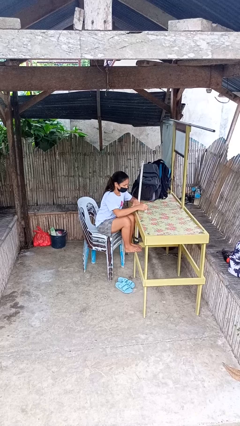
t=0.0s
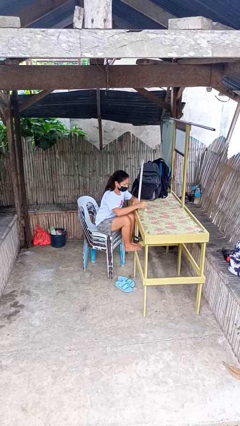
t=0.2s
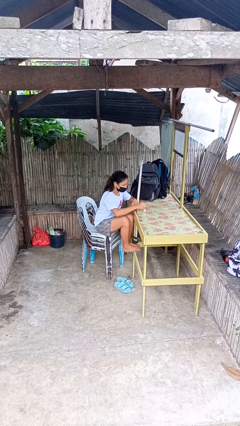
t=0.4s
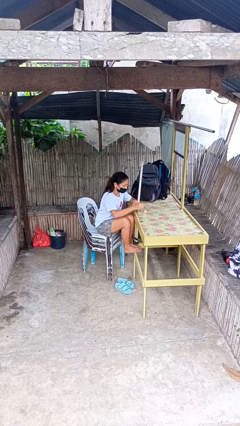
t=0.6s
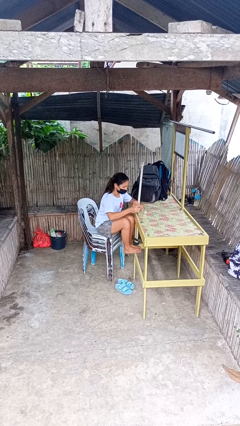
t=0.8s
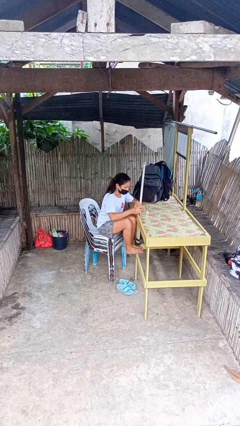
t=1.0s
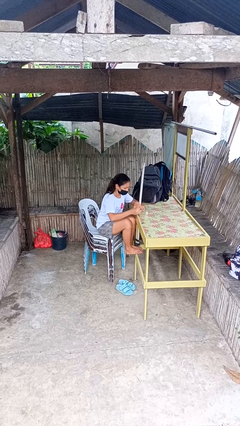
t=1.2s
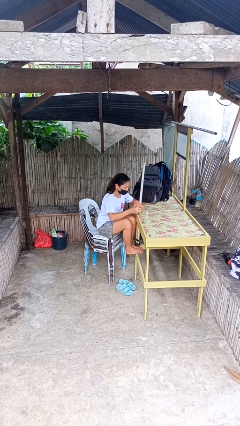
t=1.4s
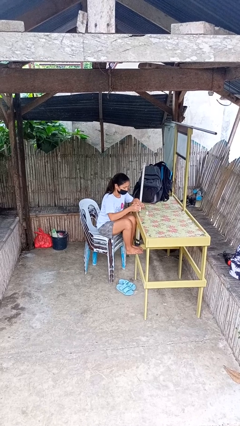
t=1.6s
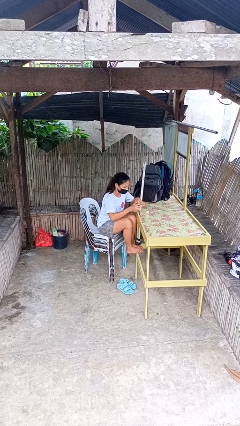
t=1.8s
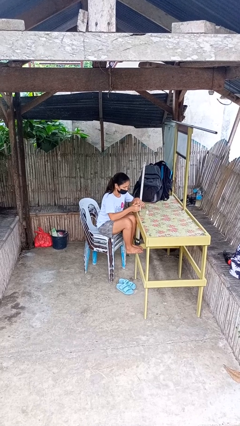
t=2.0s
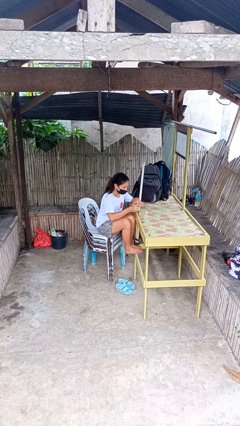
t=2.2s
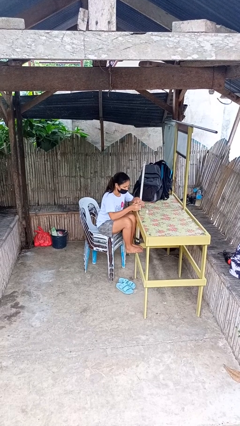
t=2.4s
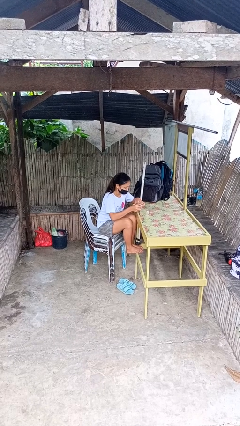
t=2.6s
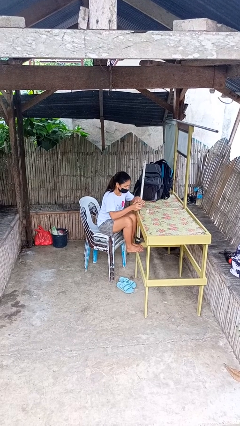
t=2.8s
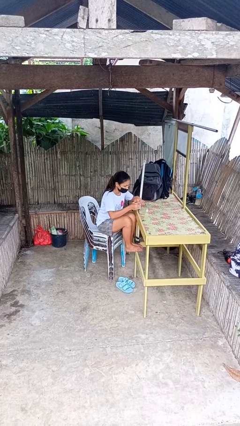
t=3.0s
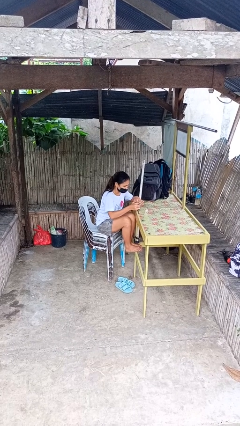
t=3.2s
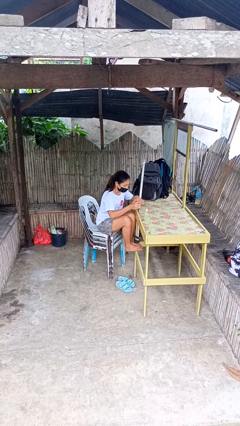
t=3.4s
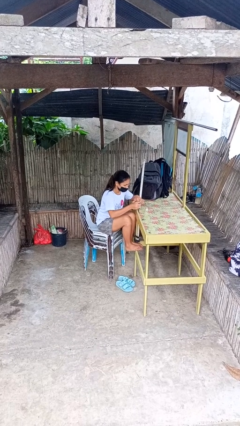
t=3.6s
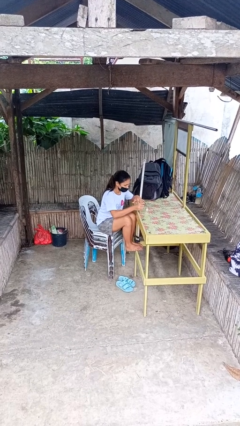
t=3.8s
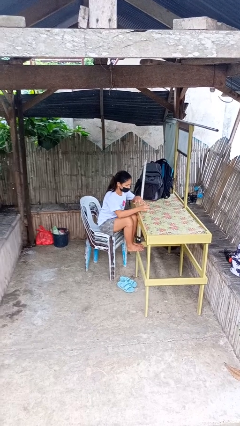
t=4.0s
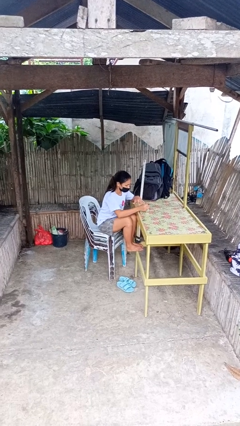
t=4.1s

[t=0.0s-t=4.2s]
person paints fingernails

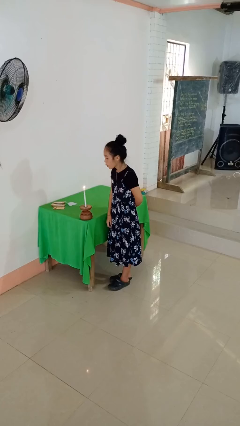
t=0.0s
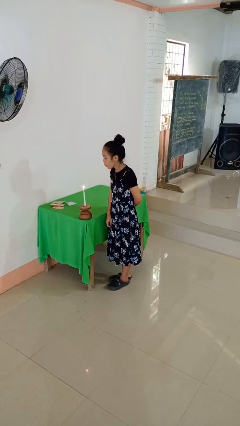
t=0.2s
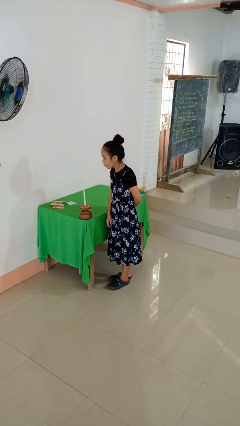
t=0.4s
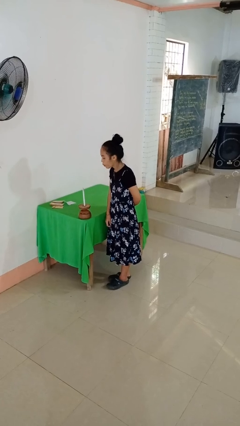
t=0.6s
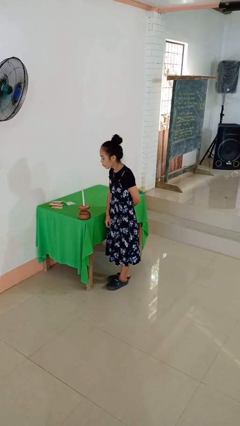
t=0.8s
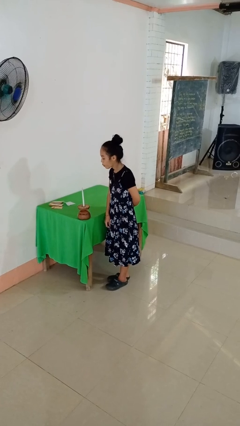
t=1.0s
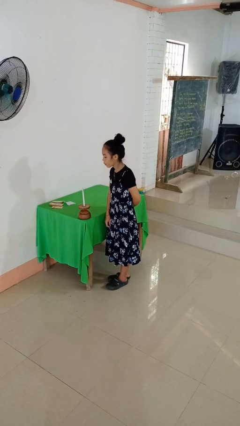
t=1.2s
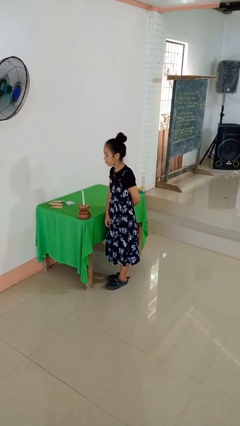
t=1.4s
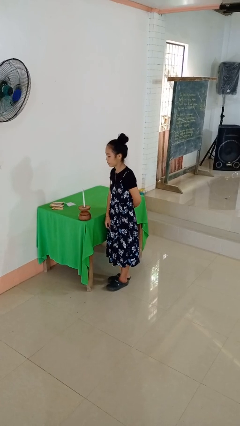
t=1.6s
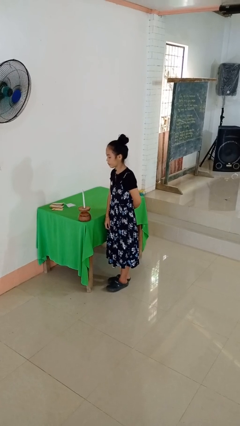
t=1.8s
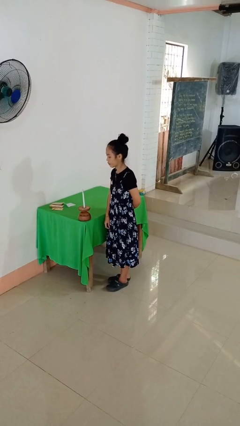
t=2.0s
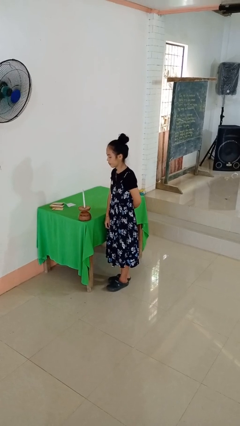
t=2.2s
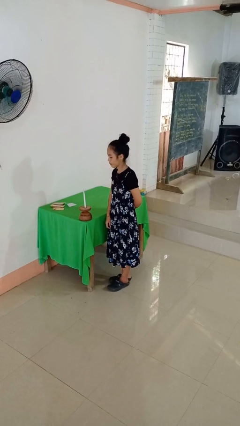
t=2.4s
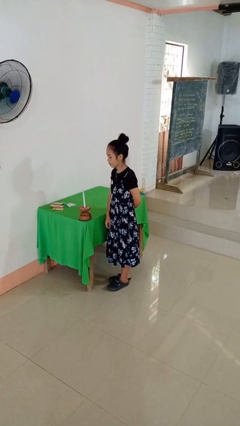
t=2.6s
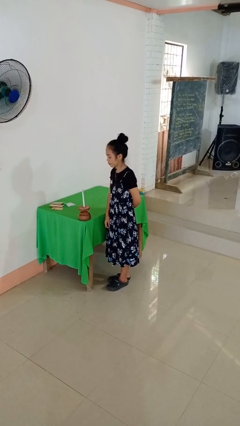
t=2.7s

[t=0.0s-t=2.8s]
person extinguishes candle

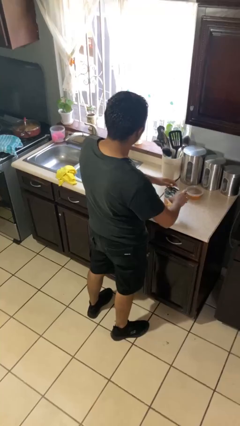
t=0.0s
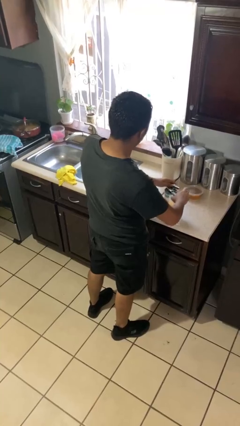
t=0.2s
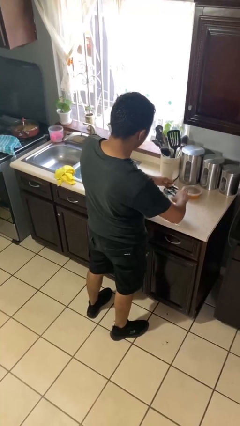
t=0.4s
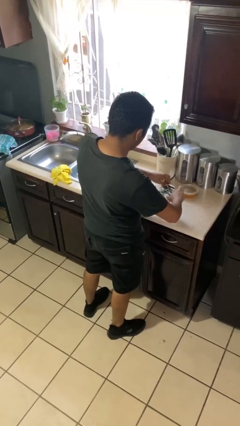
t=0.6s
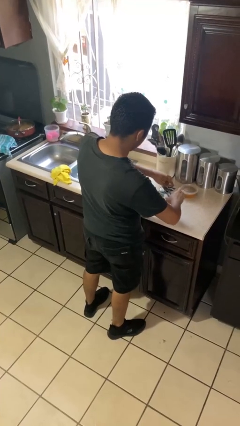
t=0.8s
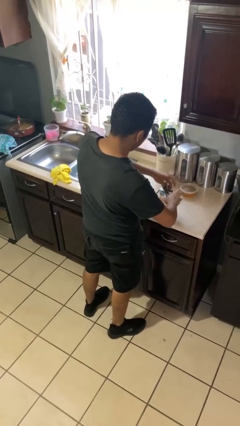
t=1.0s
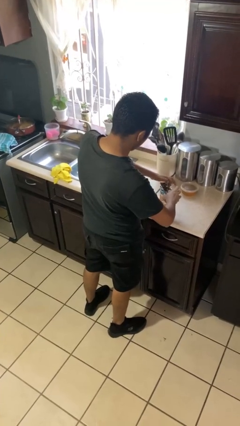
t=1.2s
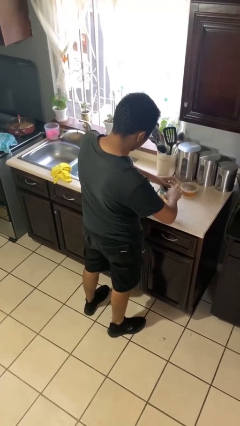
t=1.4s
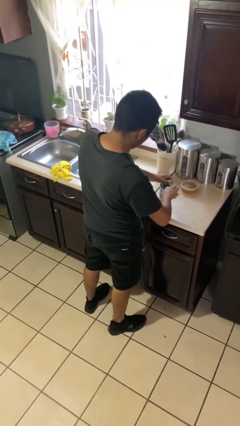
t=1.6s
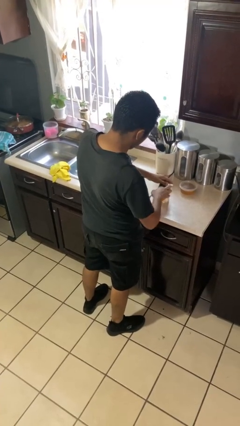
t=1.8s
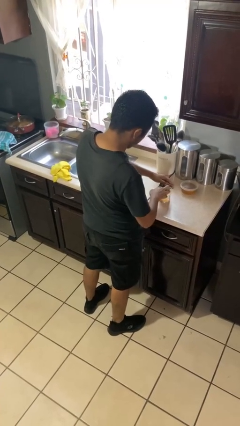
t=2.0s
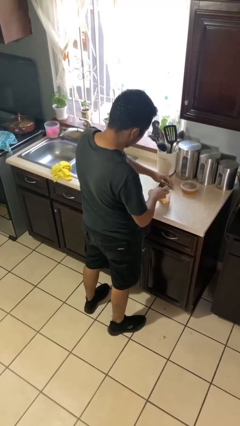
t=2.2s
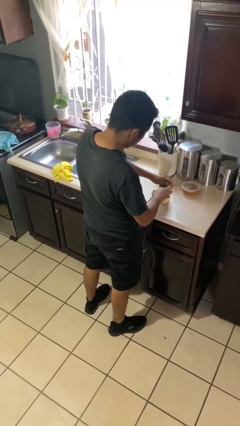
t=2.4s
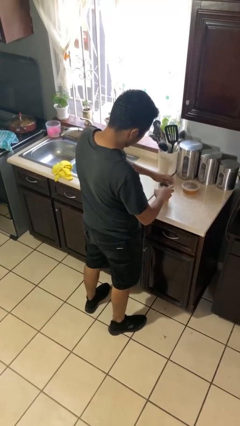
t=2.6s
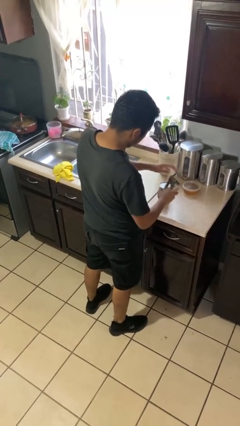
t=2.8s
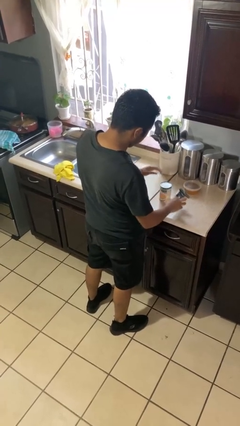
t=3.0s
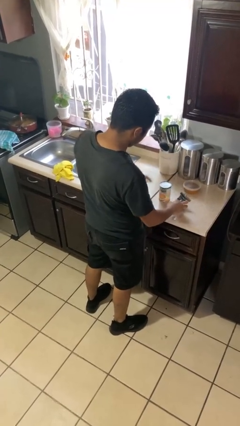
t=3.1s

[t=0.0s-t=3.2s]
person opens can with can opener

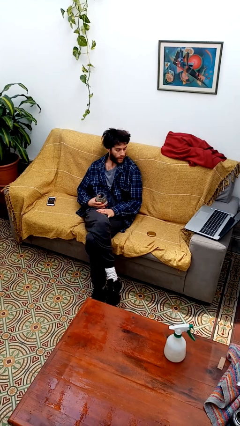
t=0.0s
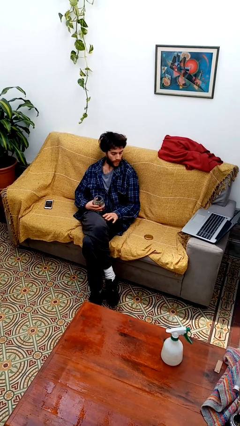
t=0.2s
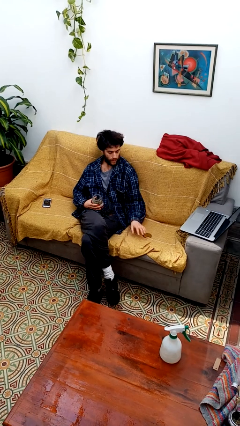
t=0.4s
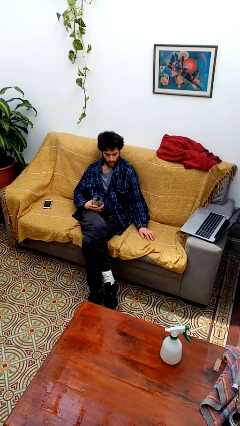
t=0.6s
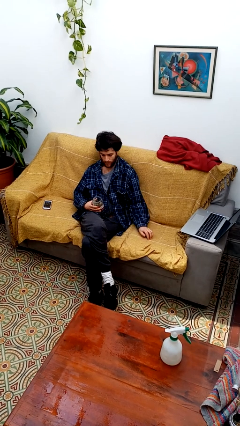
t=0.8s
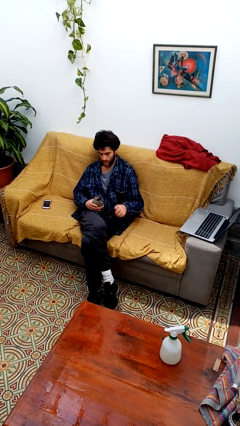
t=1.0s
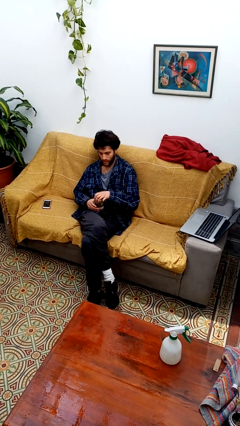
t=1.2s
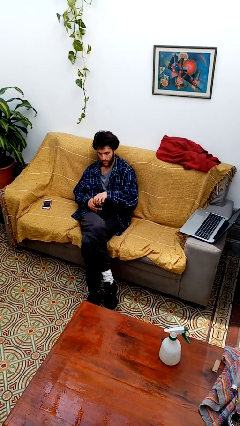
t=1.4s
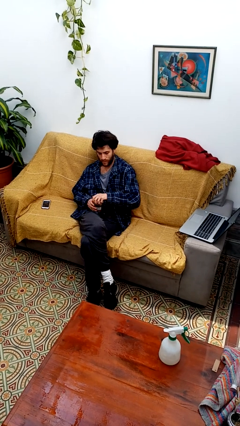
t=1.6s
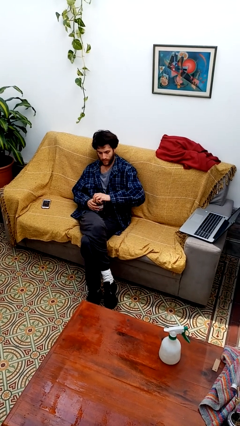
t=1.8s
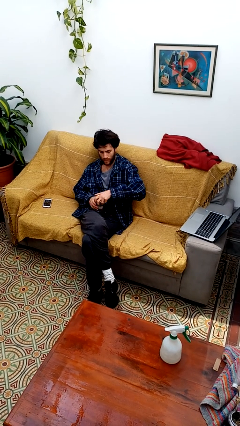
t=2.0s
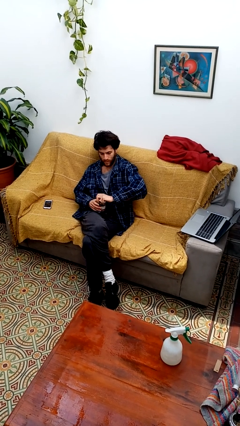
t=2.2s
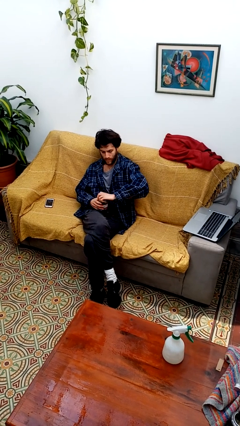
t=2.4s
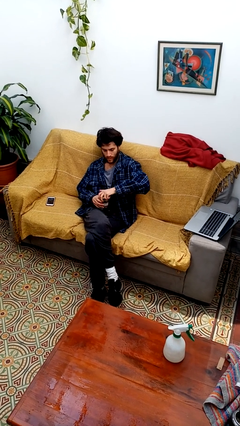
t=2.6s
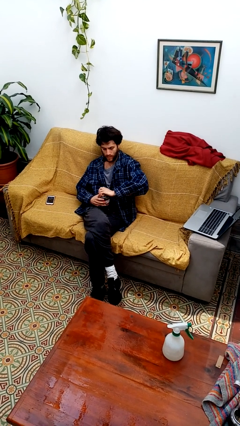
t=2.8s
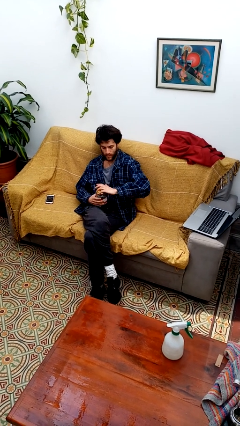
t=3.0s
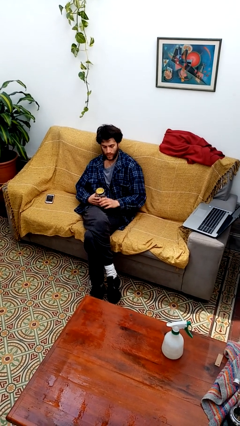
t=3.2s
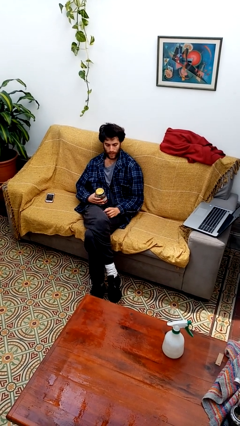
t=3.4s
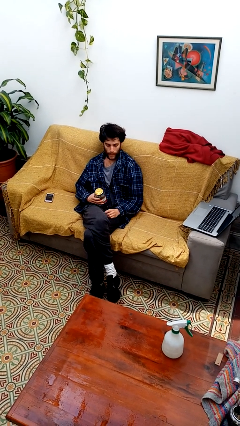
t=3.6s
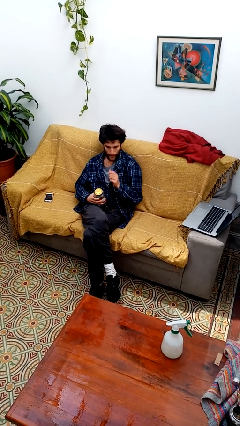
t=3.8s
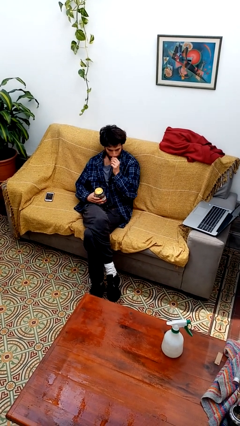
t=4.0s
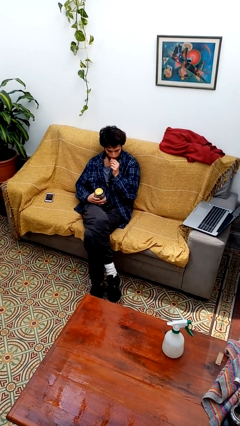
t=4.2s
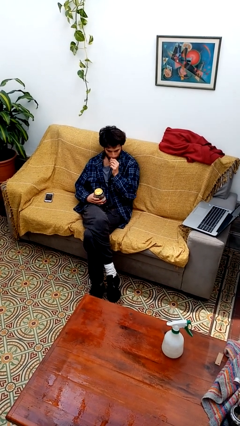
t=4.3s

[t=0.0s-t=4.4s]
person closes jar

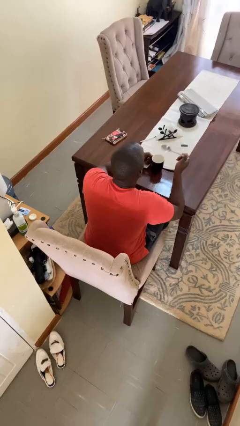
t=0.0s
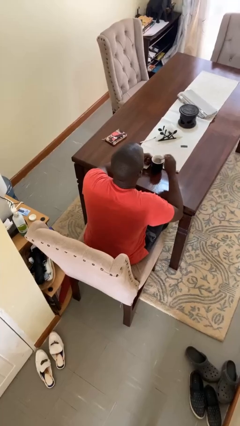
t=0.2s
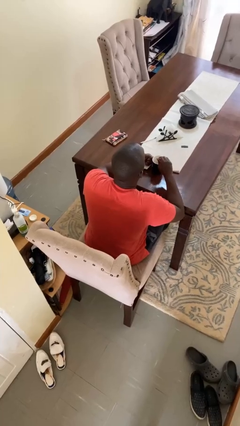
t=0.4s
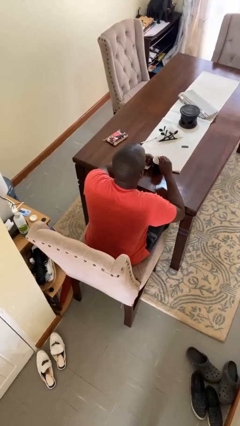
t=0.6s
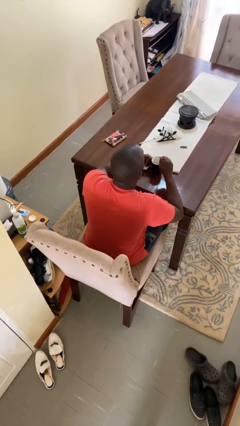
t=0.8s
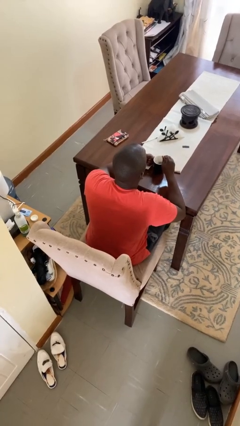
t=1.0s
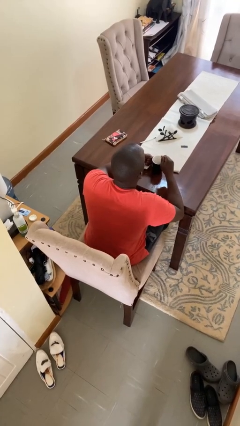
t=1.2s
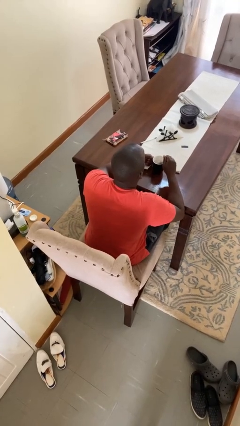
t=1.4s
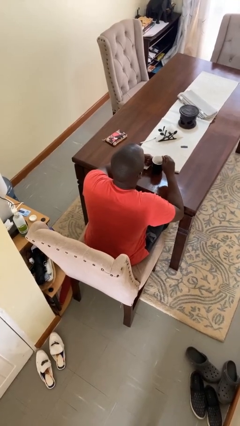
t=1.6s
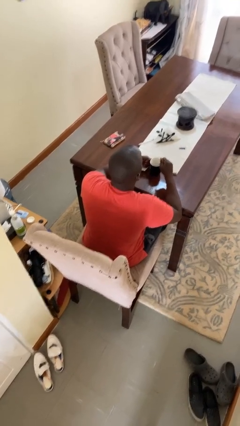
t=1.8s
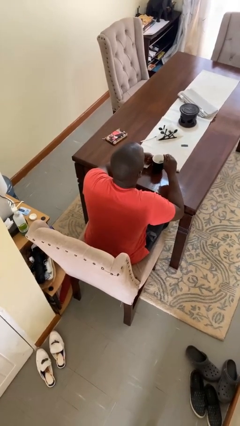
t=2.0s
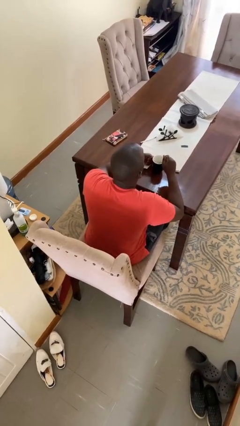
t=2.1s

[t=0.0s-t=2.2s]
person stirs mug

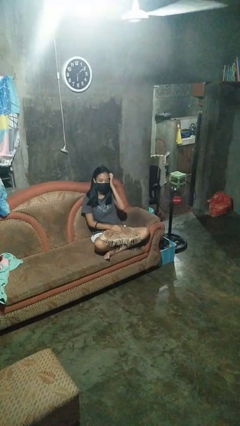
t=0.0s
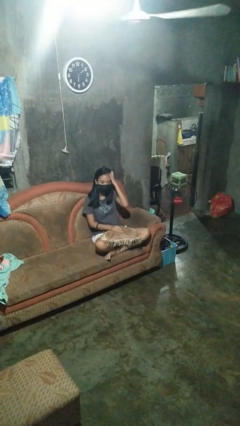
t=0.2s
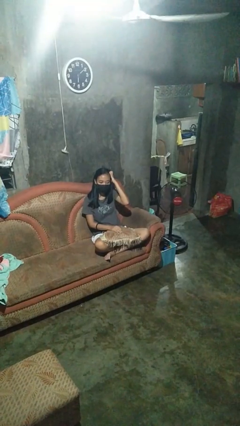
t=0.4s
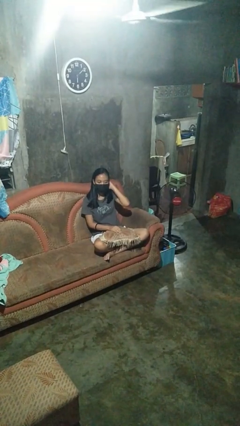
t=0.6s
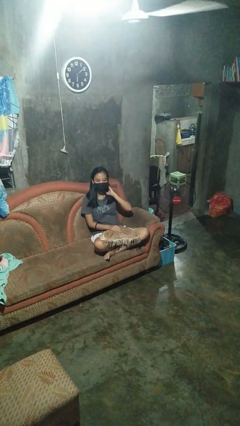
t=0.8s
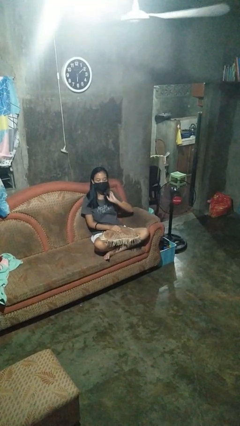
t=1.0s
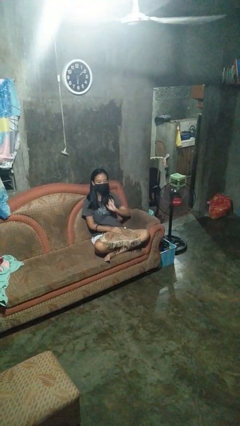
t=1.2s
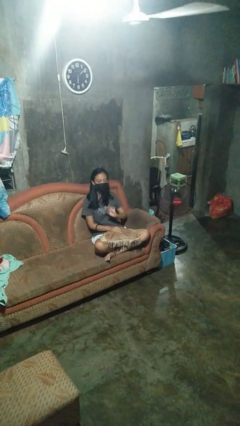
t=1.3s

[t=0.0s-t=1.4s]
person strokes hair
